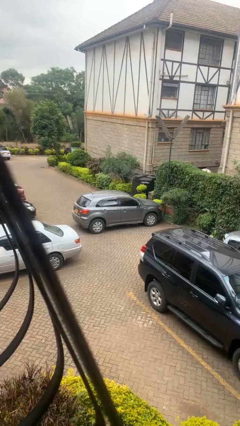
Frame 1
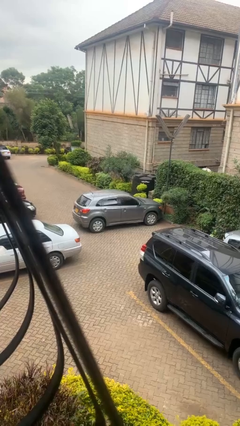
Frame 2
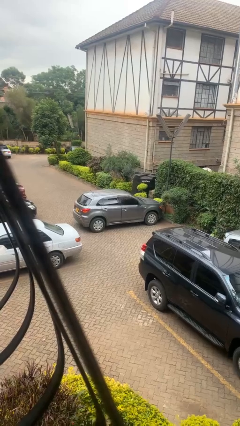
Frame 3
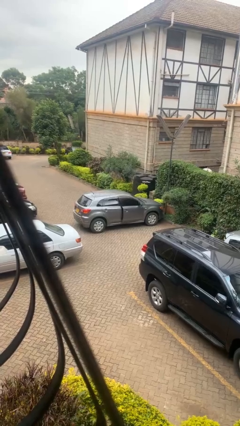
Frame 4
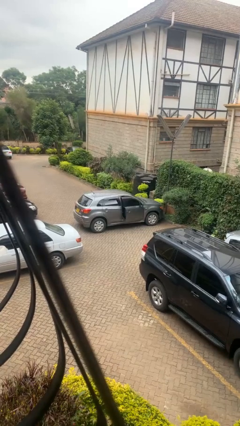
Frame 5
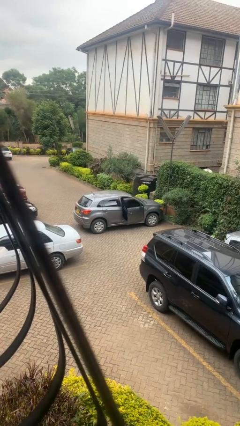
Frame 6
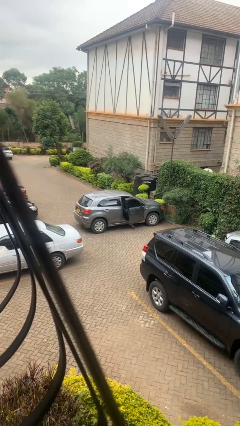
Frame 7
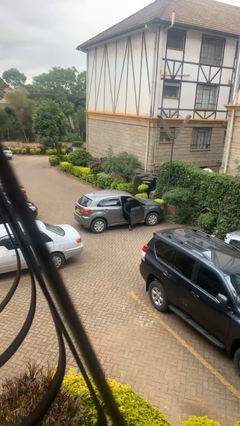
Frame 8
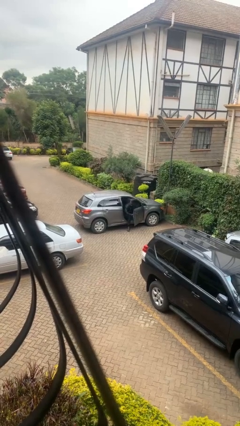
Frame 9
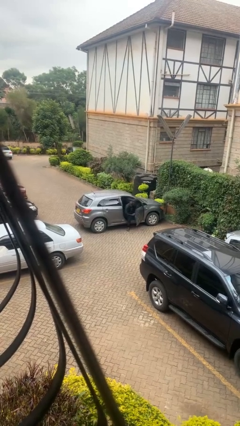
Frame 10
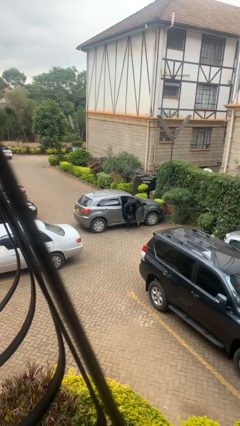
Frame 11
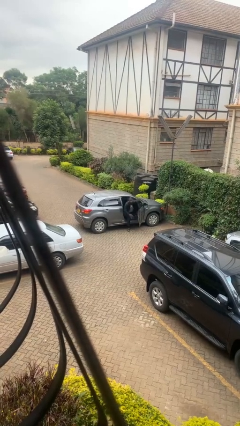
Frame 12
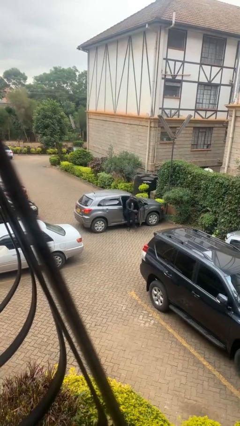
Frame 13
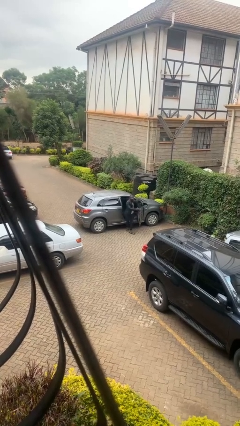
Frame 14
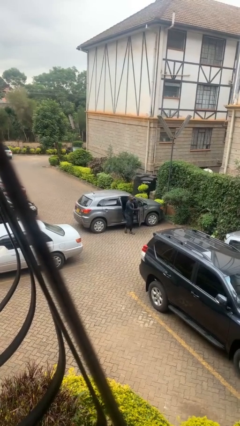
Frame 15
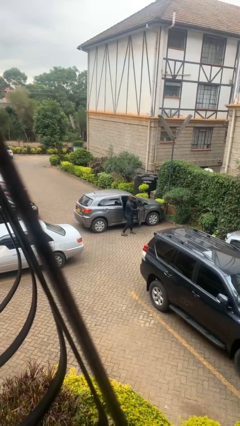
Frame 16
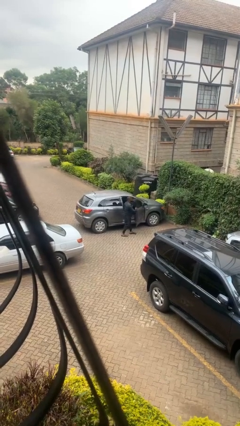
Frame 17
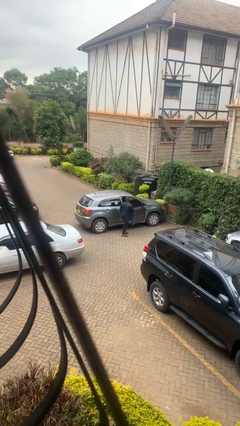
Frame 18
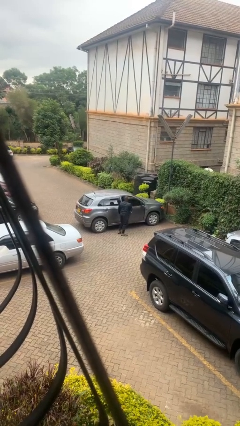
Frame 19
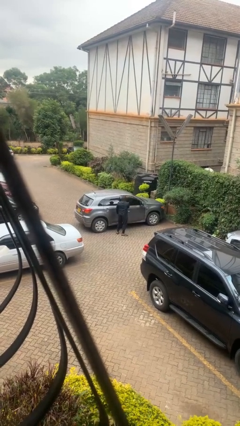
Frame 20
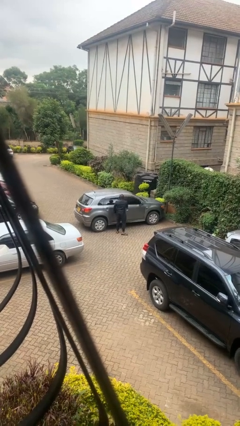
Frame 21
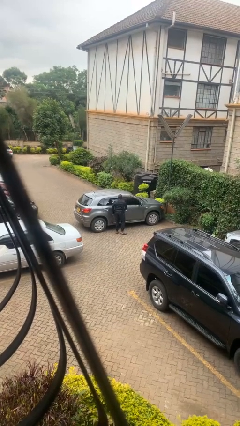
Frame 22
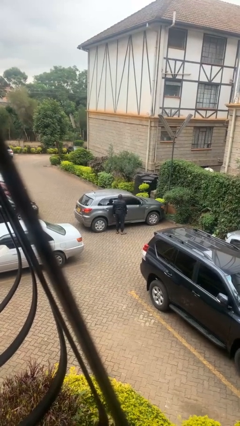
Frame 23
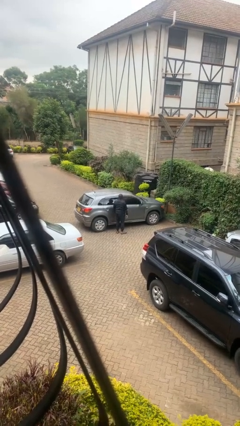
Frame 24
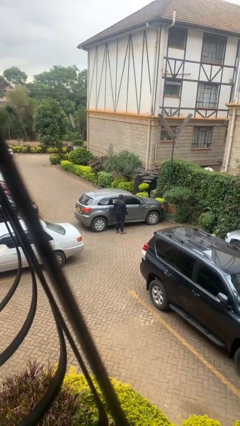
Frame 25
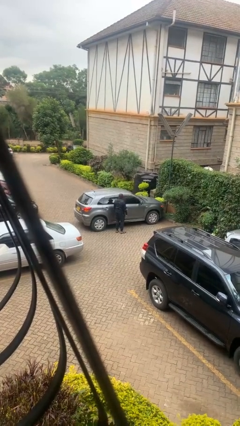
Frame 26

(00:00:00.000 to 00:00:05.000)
car drops off person

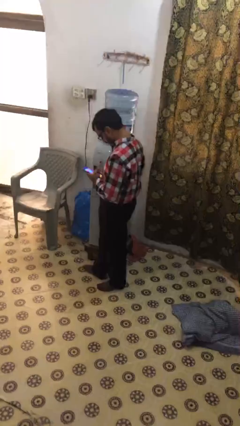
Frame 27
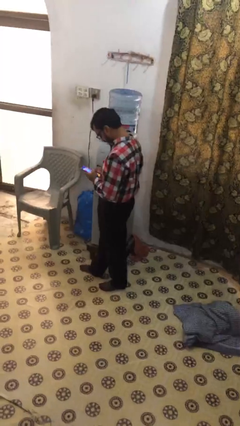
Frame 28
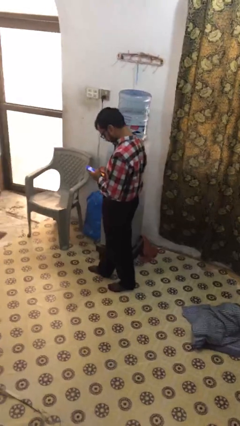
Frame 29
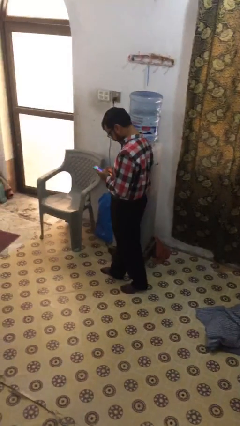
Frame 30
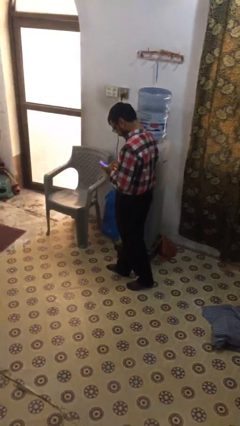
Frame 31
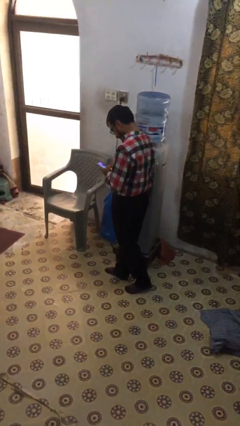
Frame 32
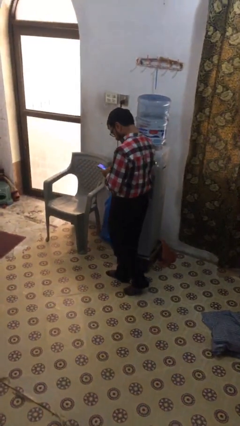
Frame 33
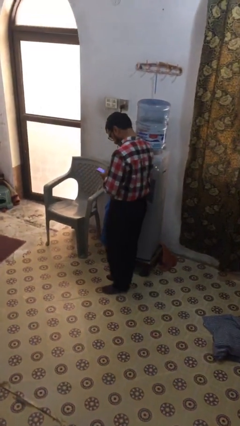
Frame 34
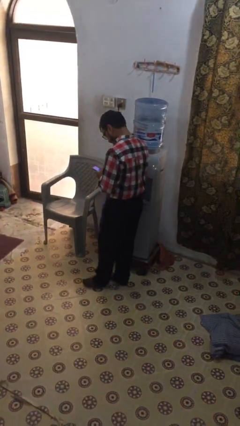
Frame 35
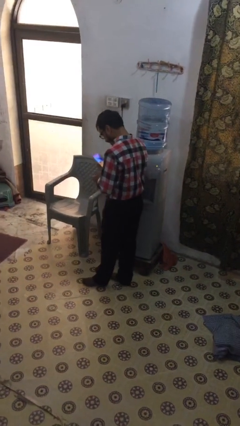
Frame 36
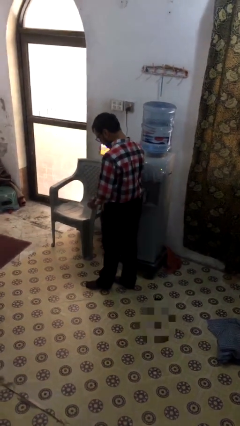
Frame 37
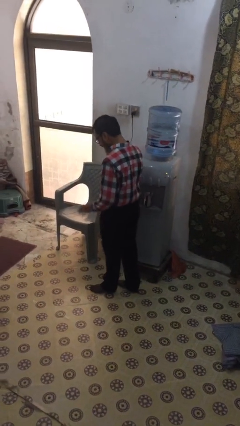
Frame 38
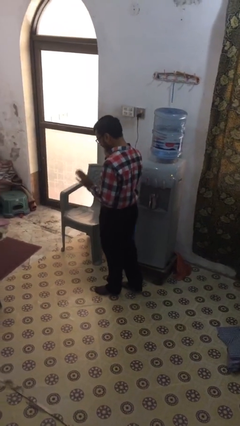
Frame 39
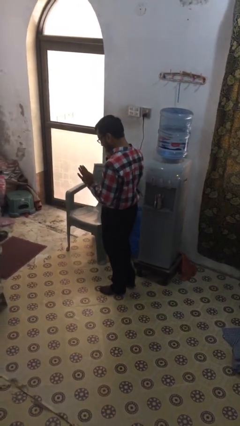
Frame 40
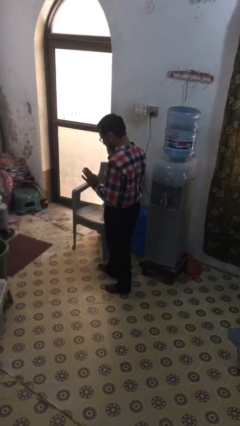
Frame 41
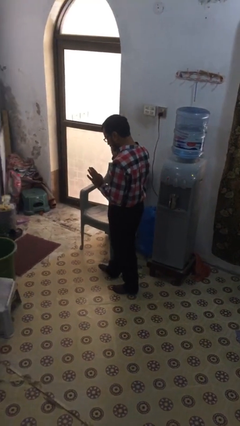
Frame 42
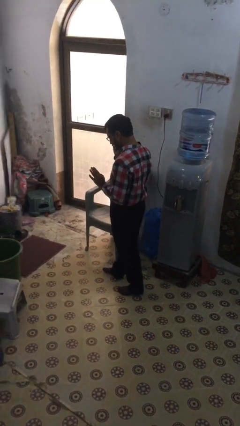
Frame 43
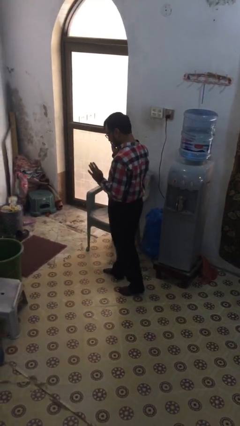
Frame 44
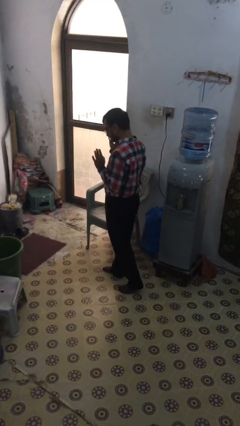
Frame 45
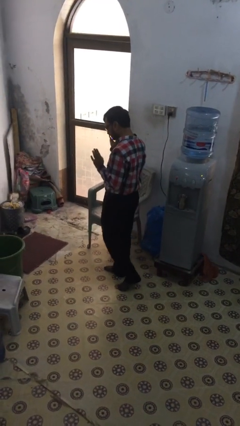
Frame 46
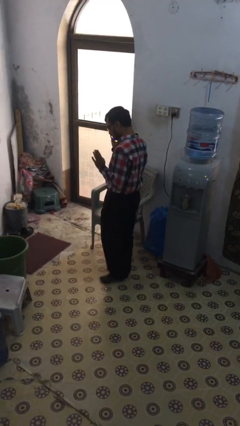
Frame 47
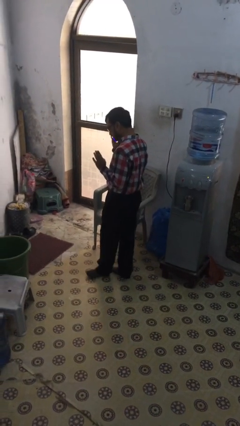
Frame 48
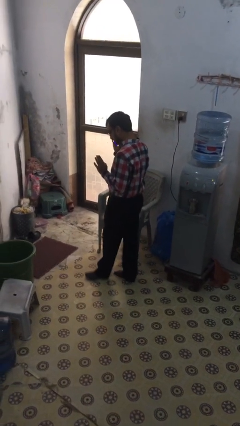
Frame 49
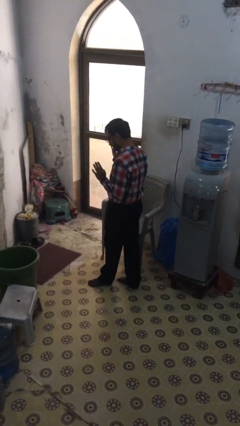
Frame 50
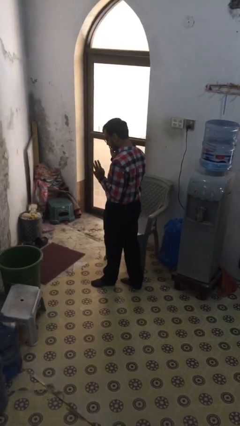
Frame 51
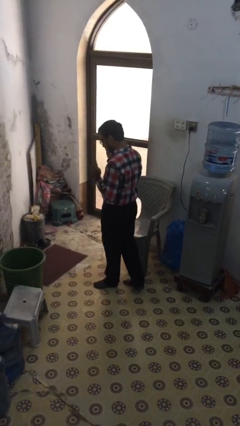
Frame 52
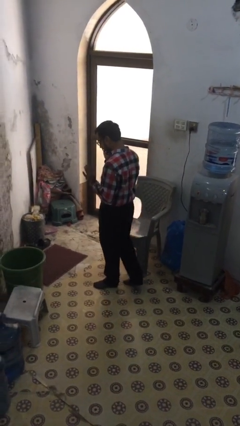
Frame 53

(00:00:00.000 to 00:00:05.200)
person talks on phone

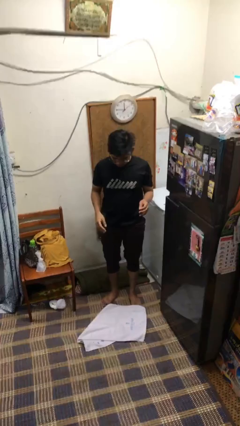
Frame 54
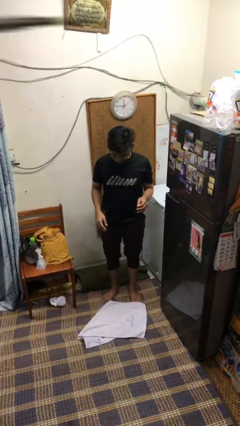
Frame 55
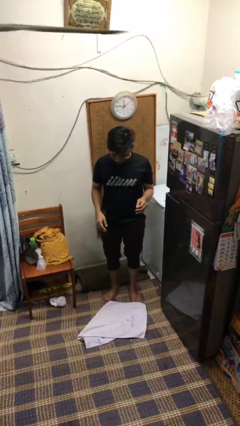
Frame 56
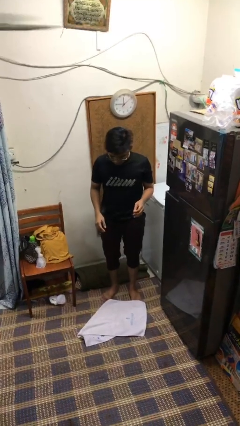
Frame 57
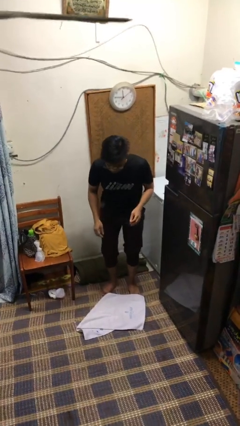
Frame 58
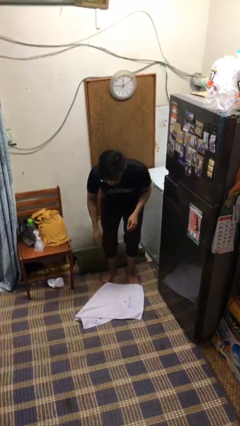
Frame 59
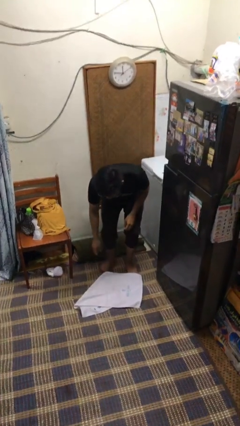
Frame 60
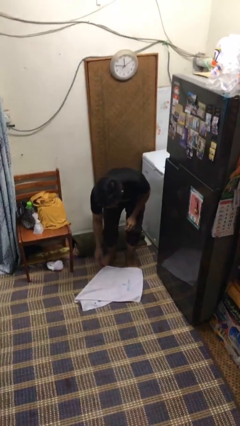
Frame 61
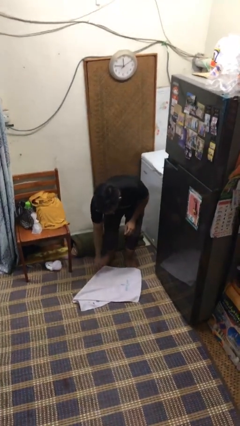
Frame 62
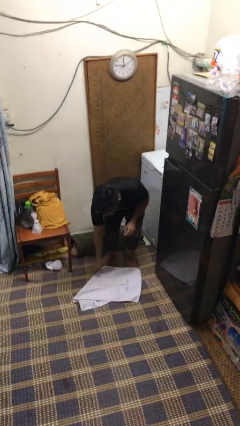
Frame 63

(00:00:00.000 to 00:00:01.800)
person picks up object from floor

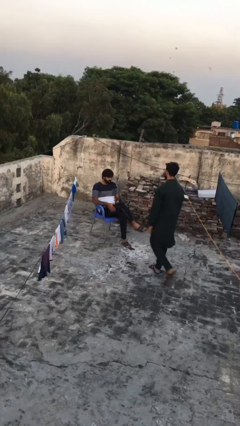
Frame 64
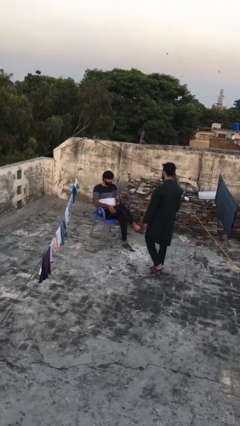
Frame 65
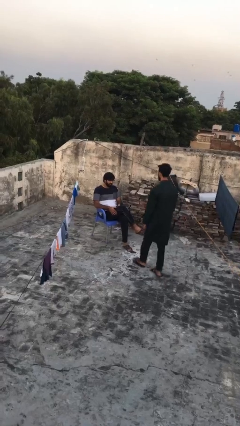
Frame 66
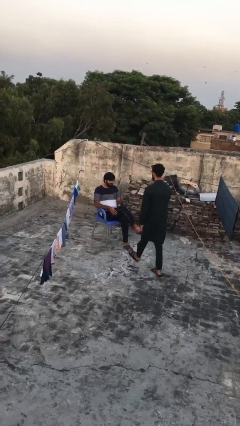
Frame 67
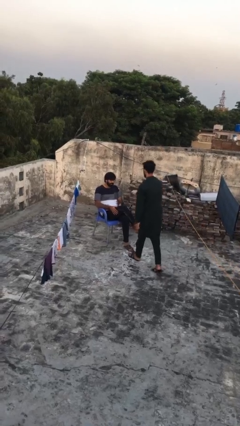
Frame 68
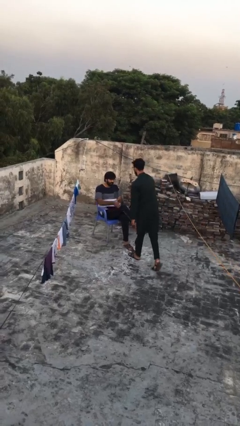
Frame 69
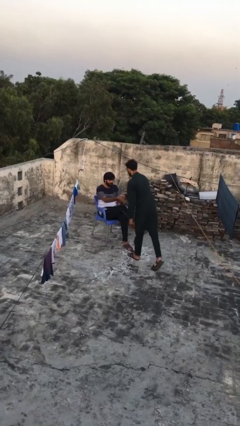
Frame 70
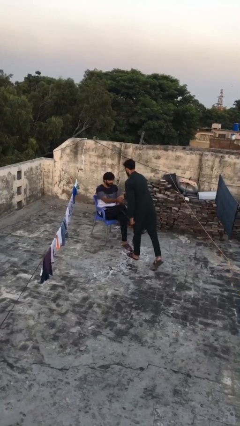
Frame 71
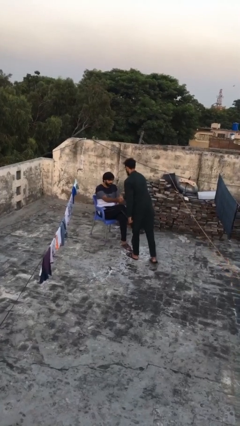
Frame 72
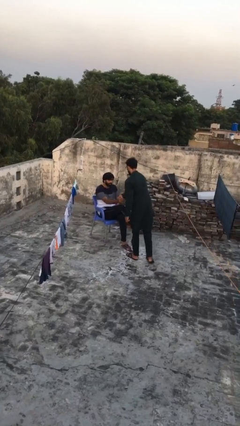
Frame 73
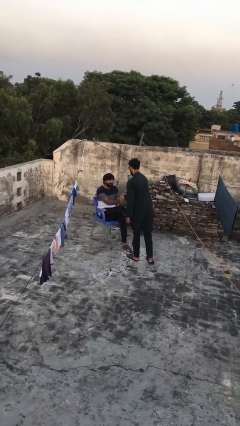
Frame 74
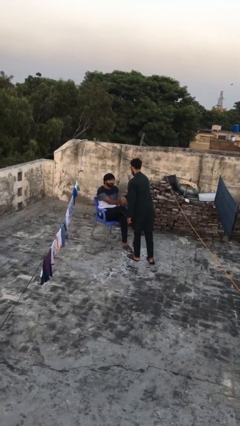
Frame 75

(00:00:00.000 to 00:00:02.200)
person shakes hand

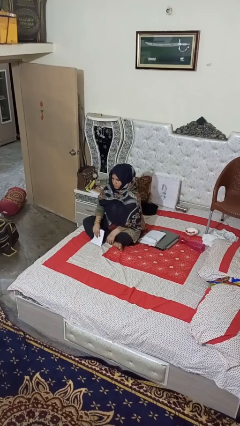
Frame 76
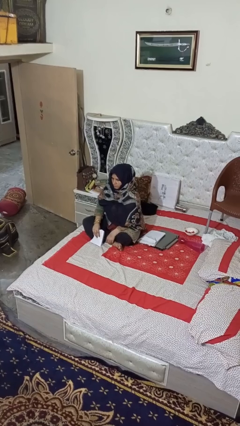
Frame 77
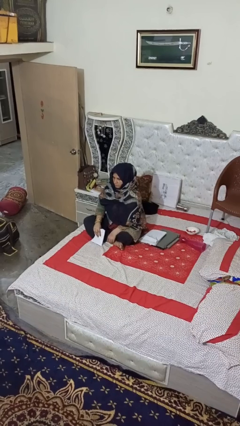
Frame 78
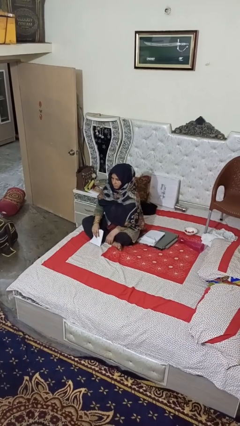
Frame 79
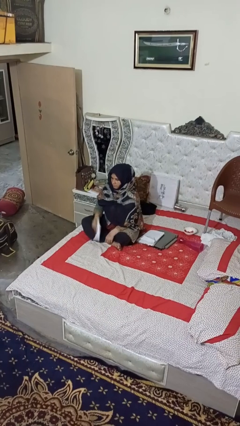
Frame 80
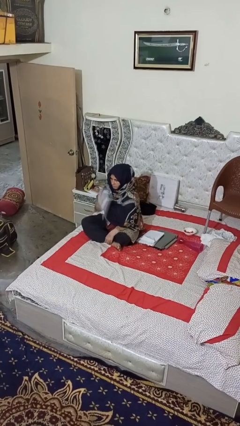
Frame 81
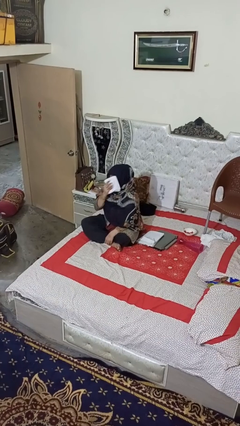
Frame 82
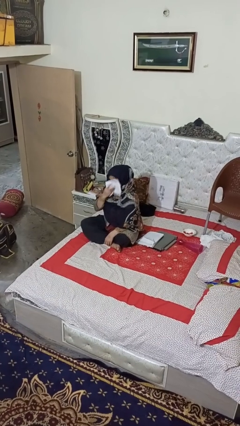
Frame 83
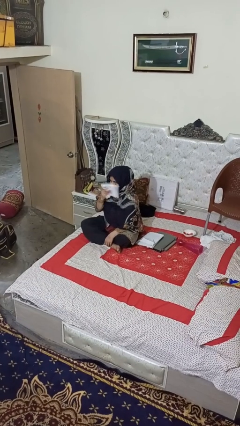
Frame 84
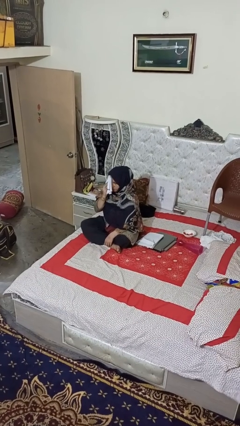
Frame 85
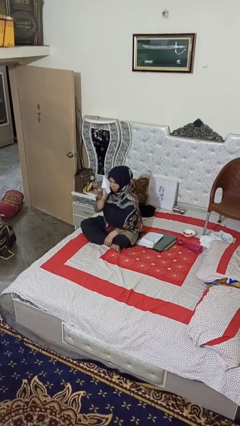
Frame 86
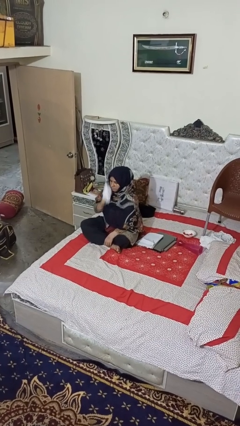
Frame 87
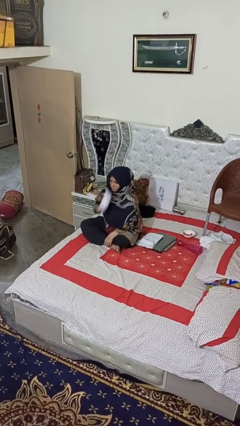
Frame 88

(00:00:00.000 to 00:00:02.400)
person wipes mouth with napkin

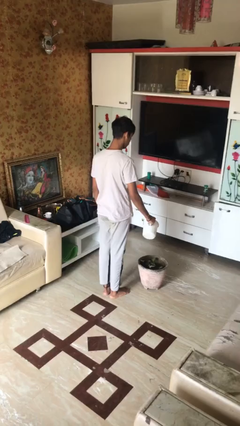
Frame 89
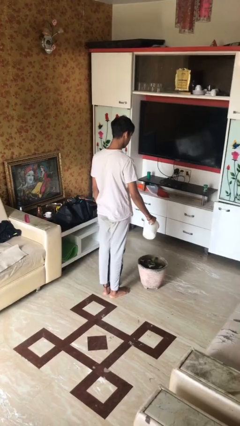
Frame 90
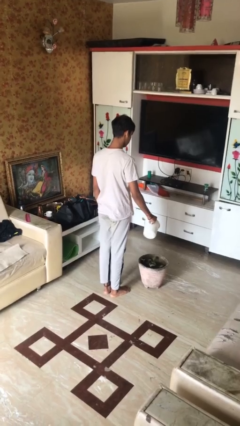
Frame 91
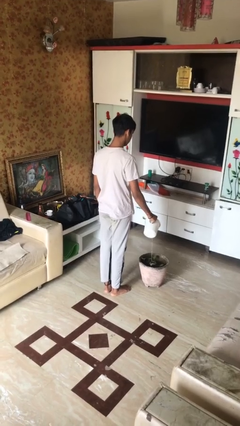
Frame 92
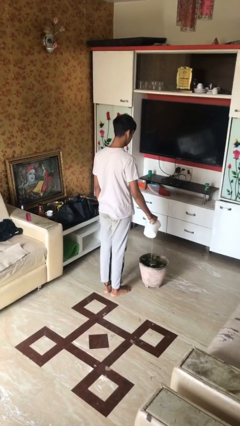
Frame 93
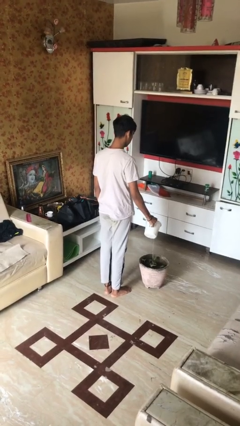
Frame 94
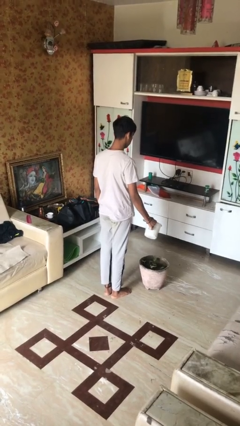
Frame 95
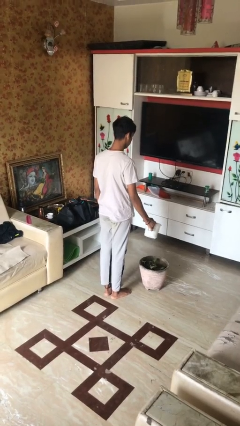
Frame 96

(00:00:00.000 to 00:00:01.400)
person waters houseplant
